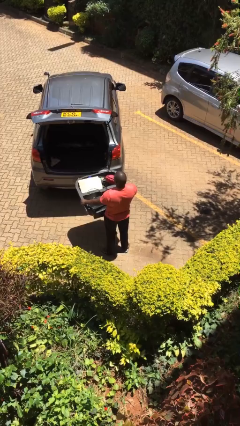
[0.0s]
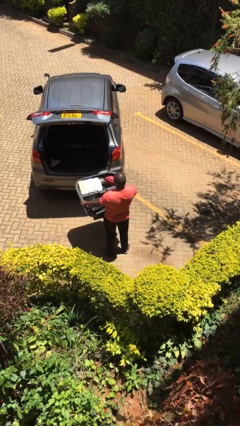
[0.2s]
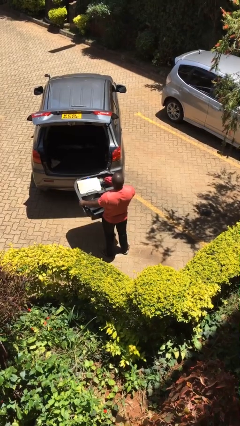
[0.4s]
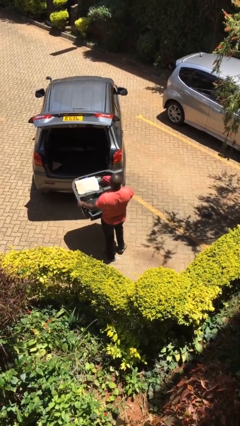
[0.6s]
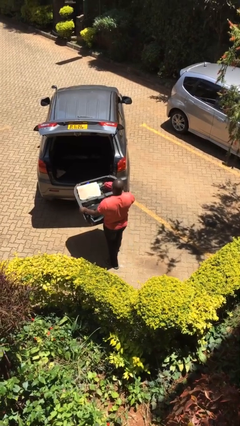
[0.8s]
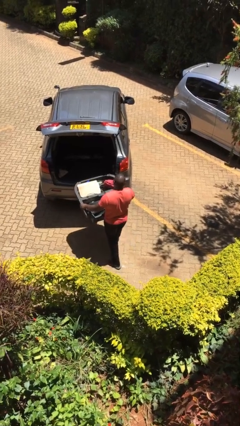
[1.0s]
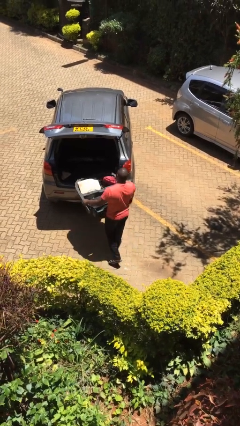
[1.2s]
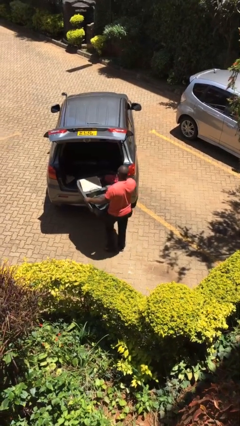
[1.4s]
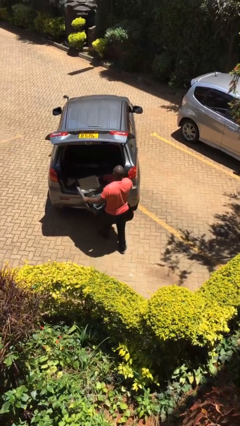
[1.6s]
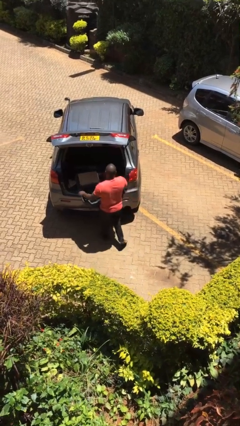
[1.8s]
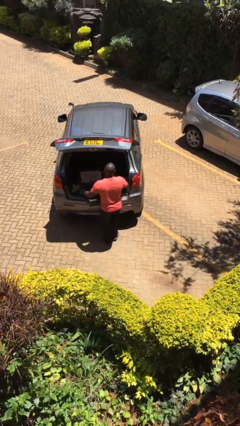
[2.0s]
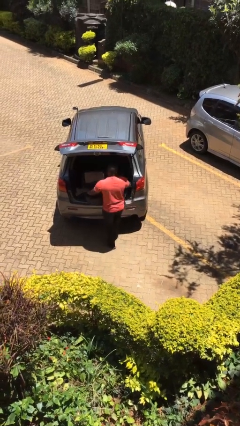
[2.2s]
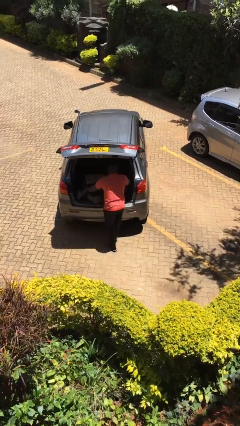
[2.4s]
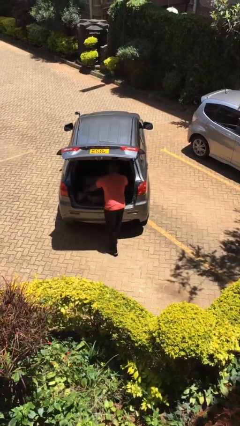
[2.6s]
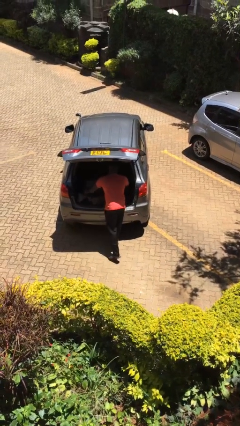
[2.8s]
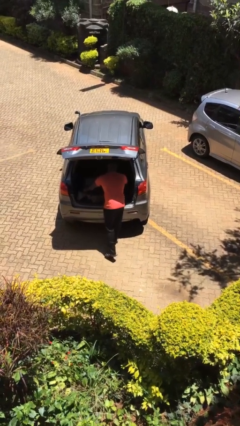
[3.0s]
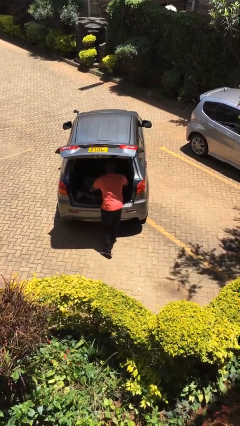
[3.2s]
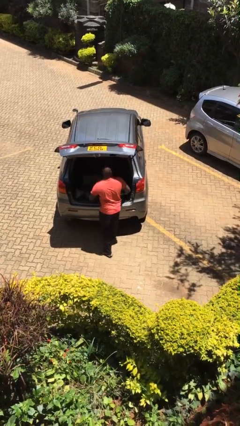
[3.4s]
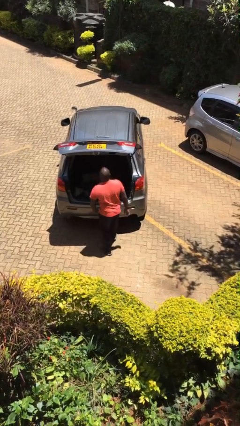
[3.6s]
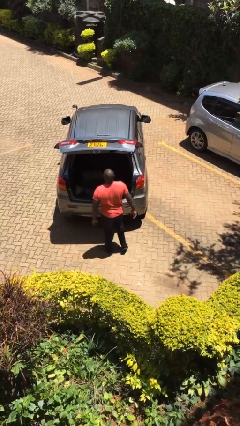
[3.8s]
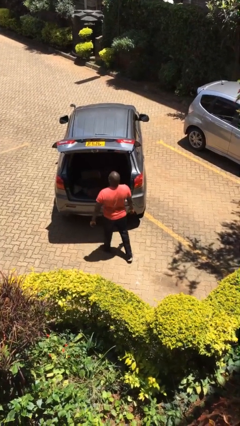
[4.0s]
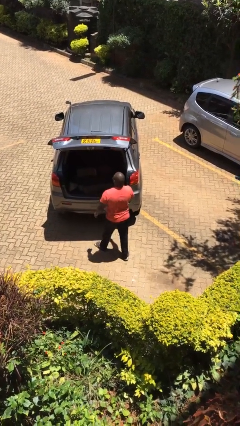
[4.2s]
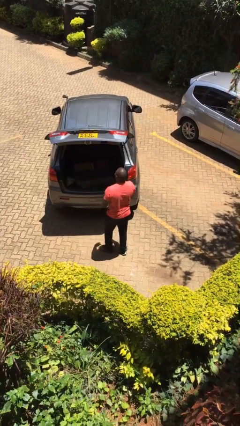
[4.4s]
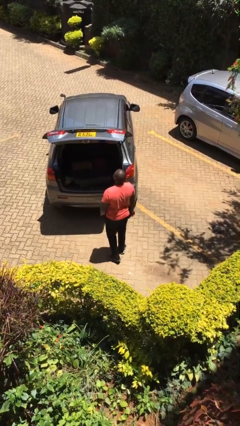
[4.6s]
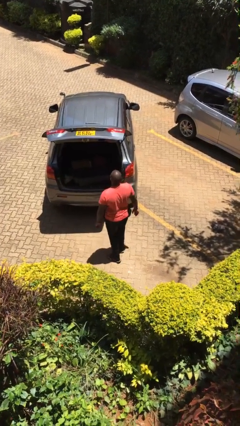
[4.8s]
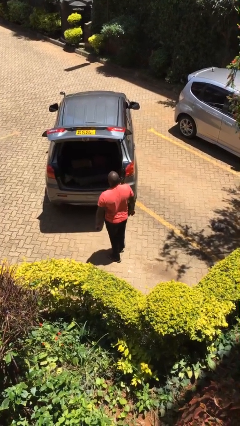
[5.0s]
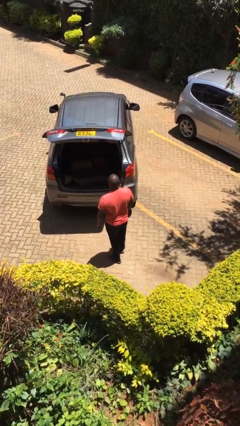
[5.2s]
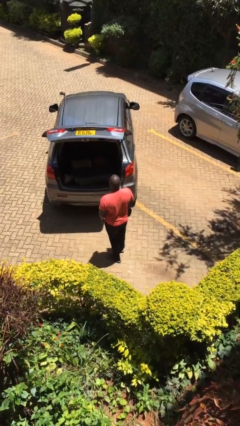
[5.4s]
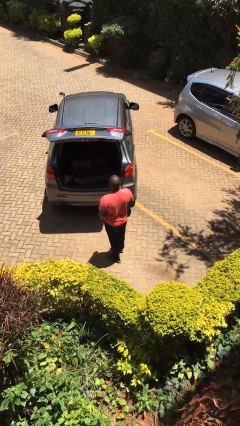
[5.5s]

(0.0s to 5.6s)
person loads car

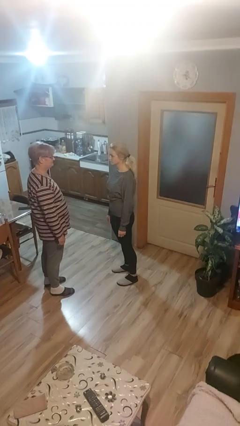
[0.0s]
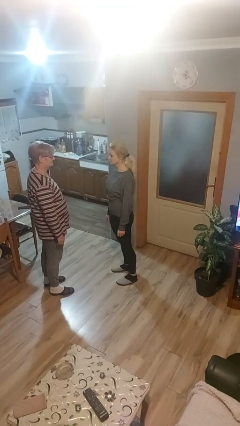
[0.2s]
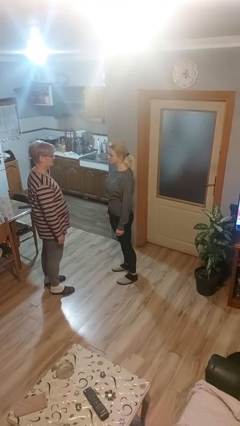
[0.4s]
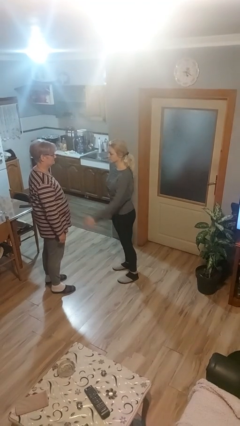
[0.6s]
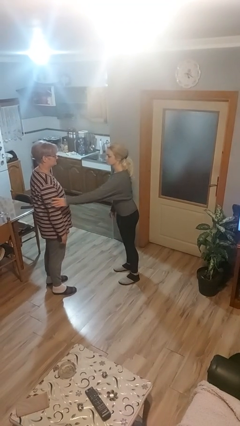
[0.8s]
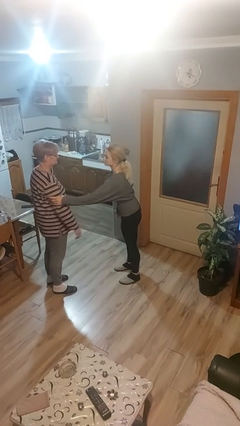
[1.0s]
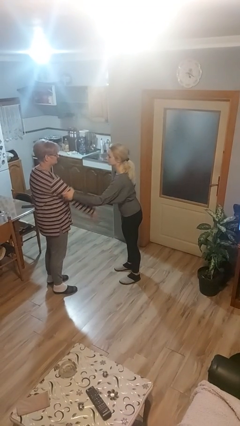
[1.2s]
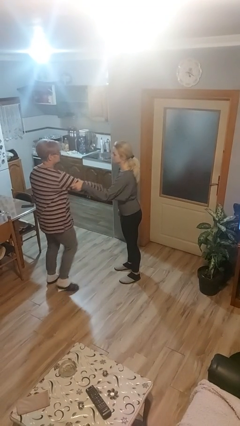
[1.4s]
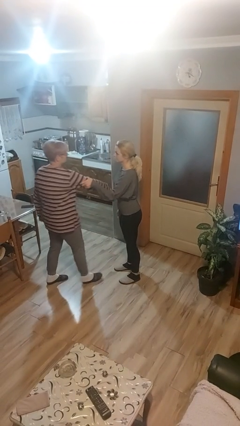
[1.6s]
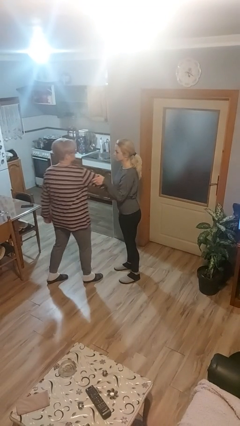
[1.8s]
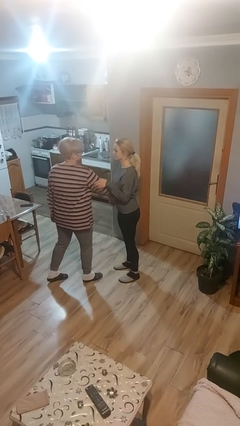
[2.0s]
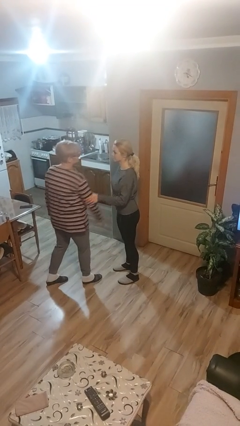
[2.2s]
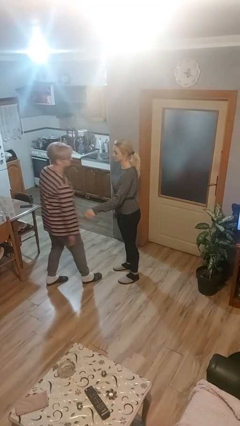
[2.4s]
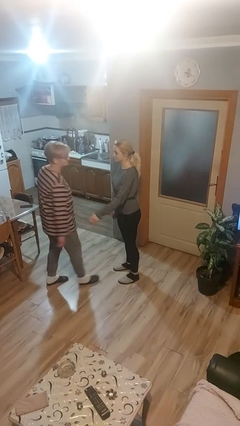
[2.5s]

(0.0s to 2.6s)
person grabs person by bicep

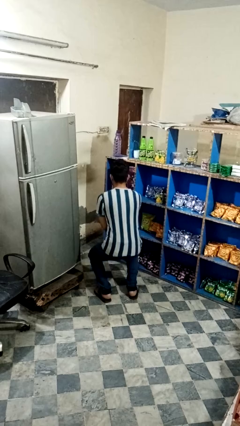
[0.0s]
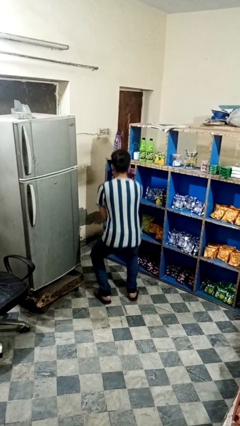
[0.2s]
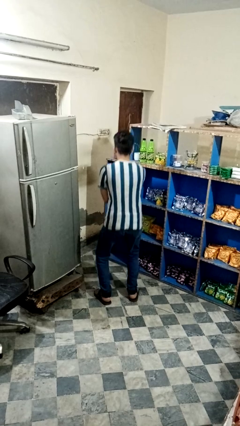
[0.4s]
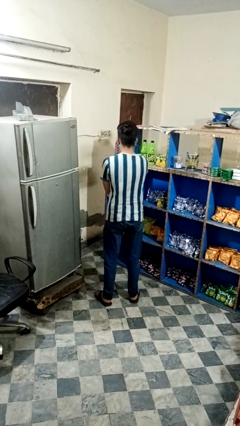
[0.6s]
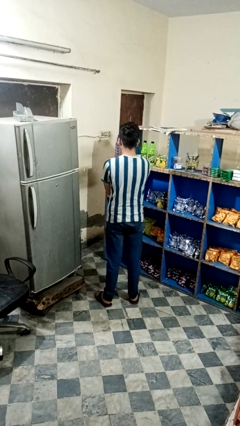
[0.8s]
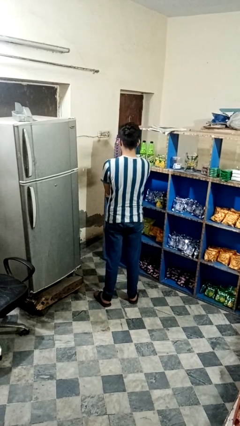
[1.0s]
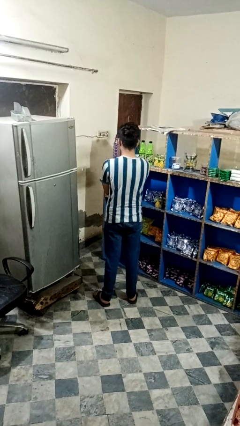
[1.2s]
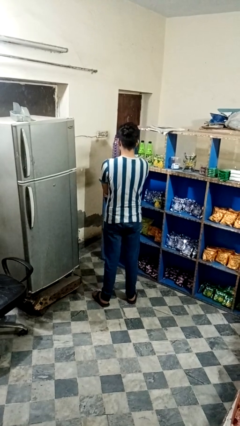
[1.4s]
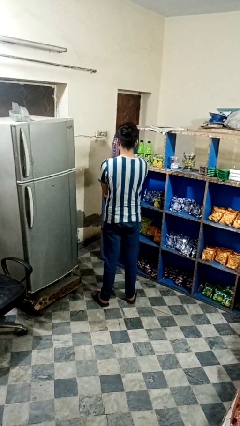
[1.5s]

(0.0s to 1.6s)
person stands up

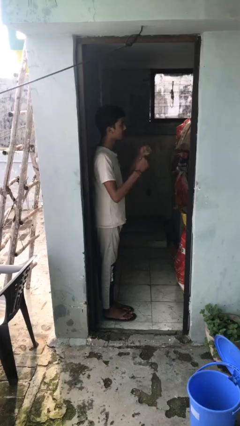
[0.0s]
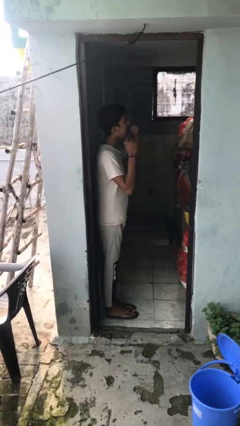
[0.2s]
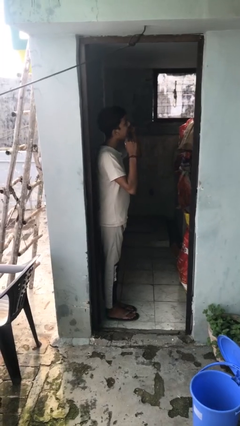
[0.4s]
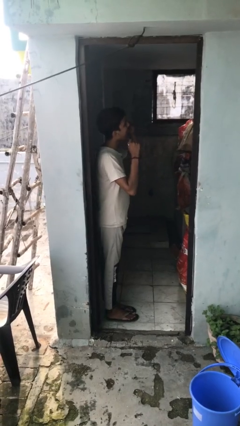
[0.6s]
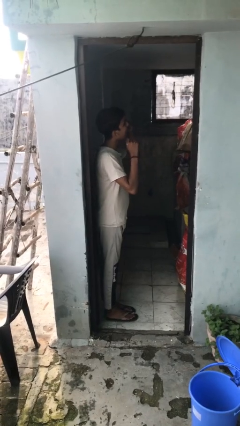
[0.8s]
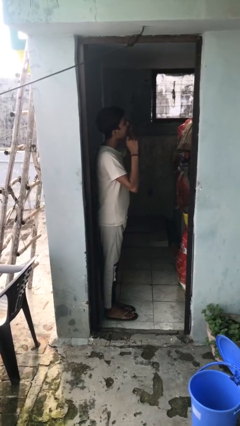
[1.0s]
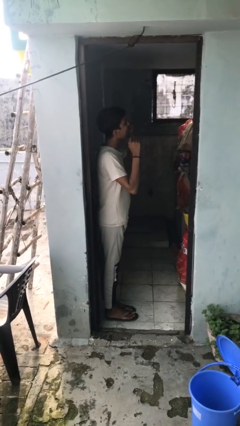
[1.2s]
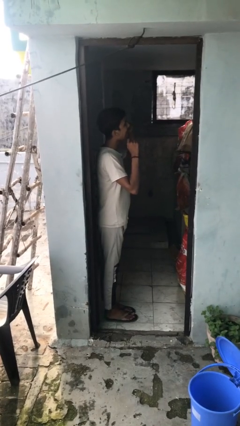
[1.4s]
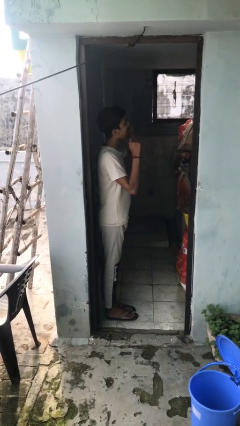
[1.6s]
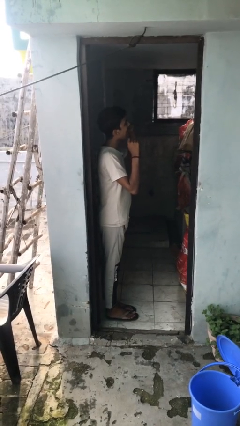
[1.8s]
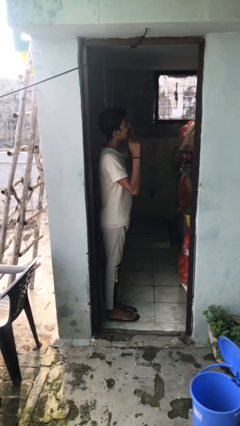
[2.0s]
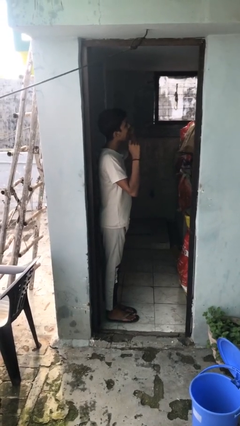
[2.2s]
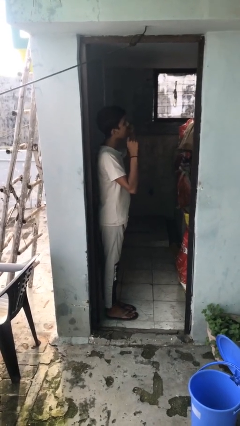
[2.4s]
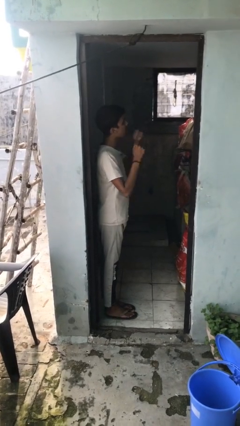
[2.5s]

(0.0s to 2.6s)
person flosses

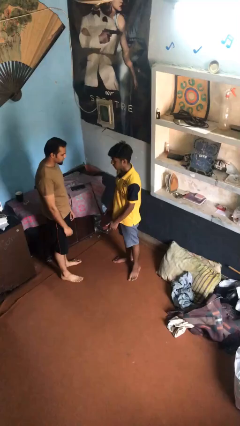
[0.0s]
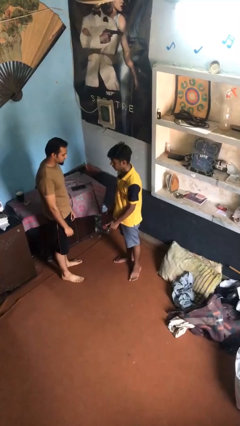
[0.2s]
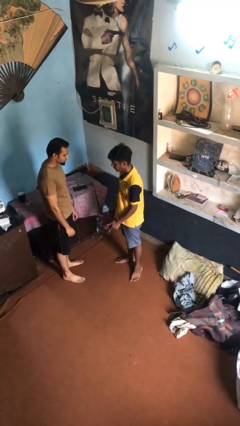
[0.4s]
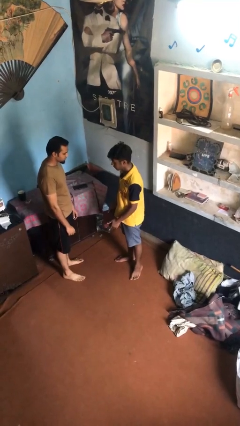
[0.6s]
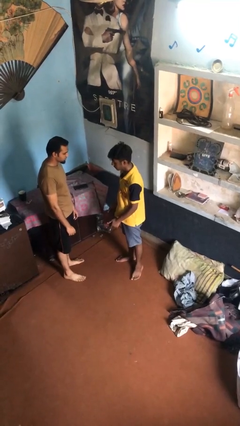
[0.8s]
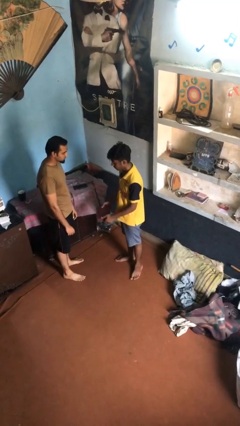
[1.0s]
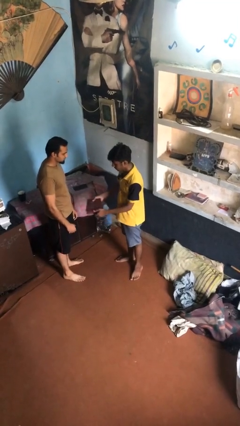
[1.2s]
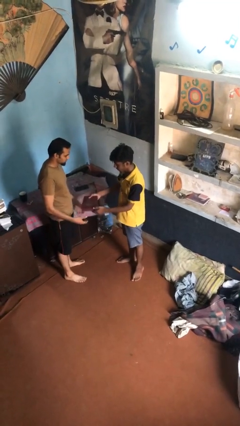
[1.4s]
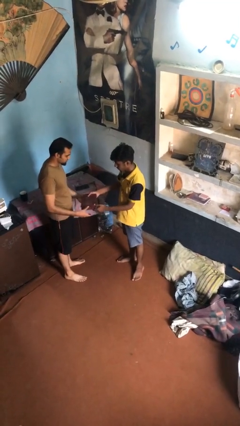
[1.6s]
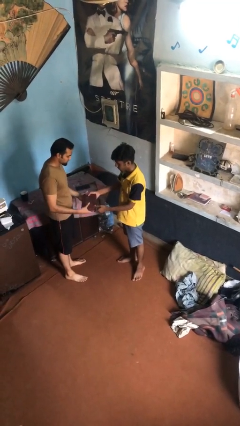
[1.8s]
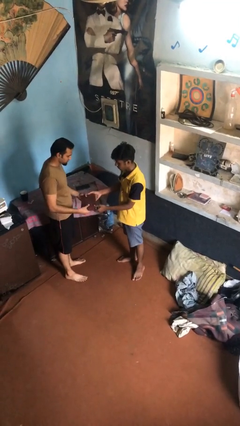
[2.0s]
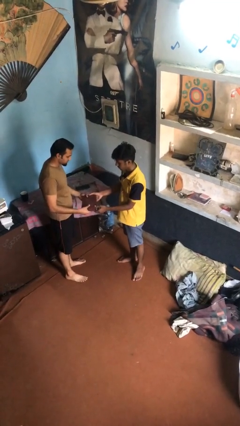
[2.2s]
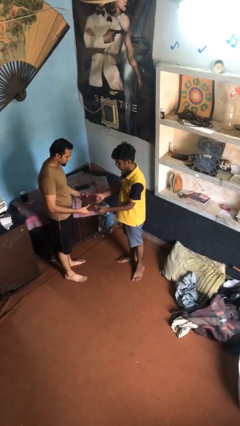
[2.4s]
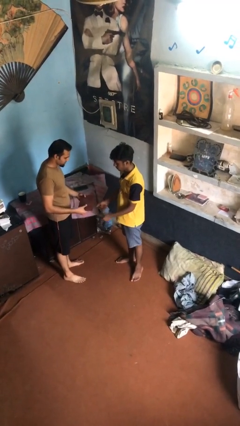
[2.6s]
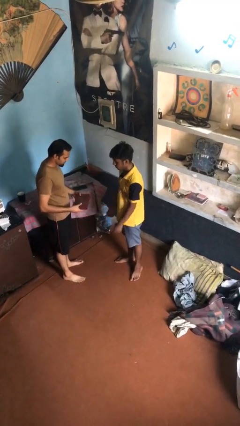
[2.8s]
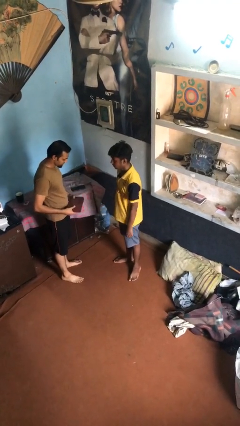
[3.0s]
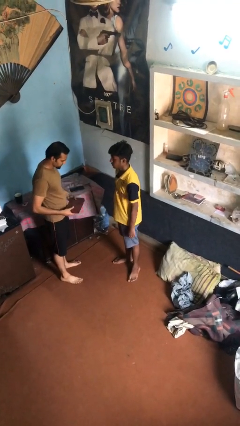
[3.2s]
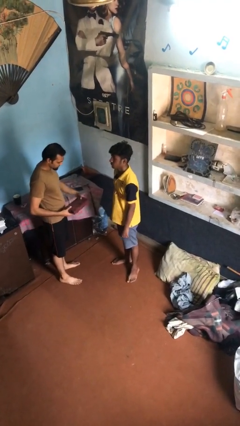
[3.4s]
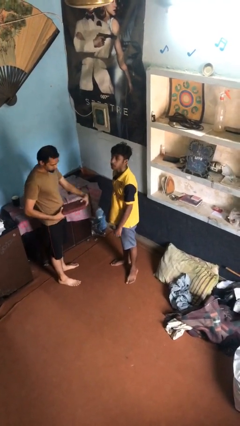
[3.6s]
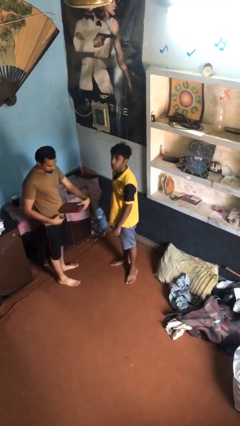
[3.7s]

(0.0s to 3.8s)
person transfers object to person

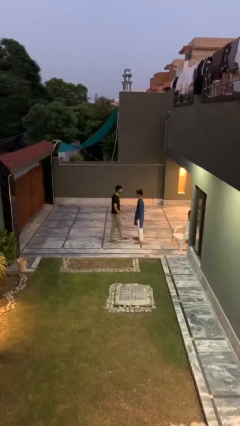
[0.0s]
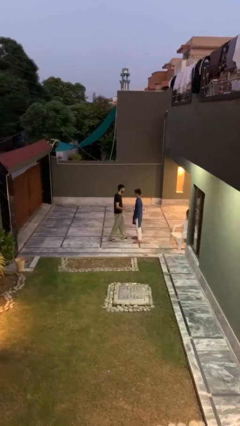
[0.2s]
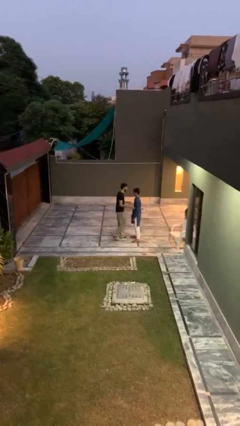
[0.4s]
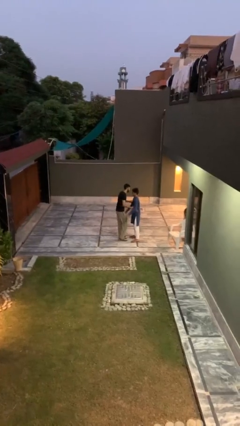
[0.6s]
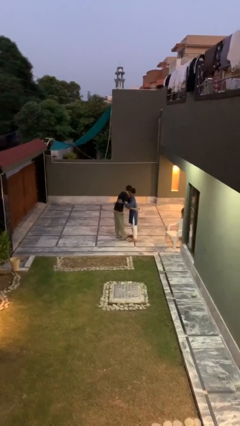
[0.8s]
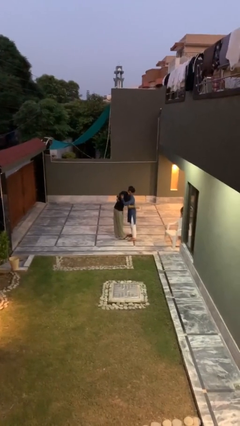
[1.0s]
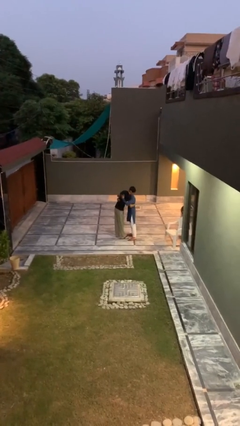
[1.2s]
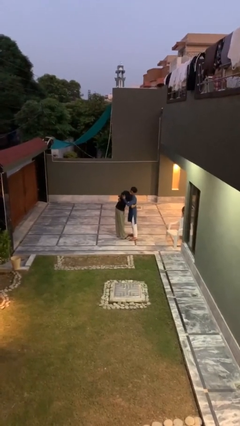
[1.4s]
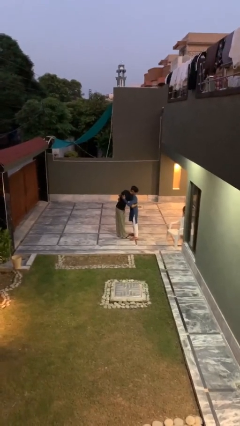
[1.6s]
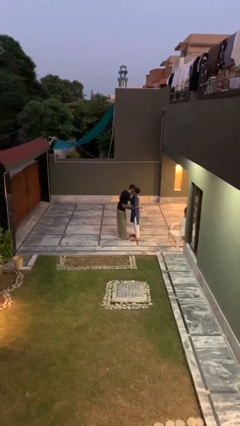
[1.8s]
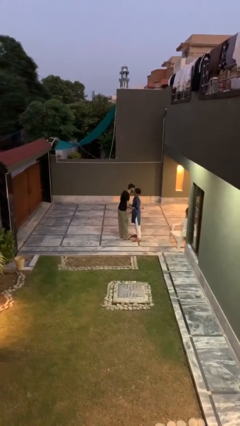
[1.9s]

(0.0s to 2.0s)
person embraces person
